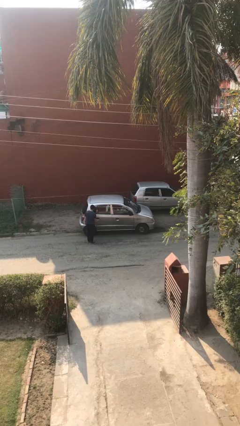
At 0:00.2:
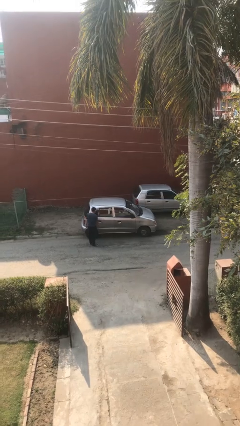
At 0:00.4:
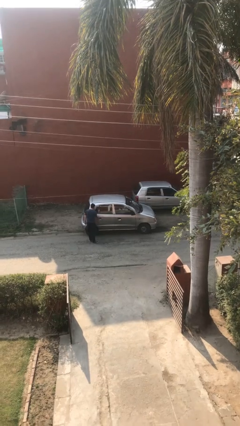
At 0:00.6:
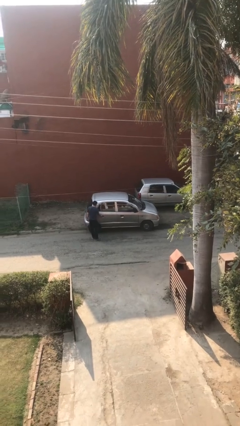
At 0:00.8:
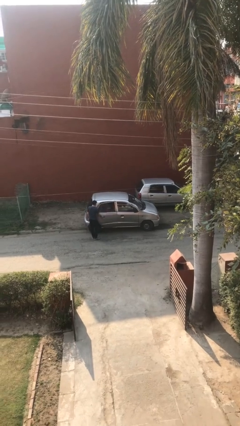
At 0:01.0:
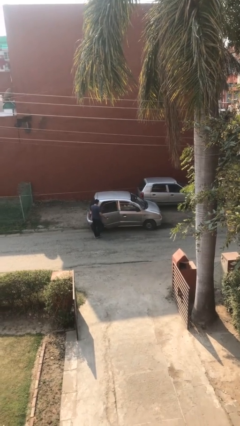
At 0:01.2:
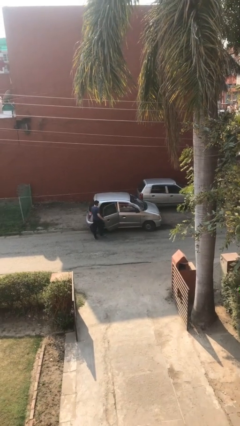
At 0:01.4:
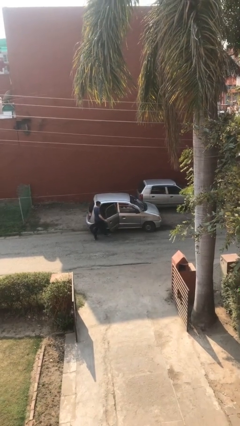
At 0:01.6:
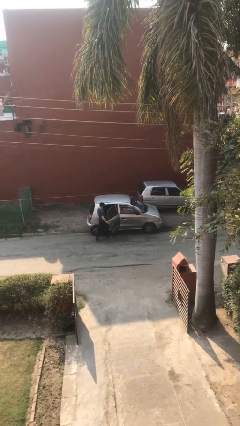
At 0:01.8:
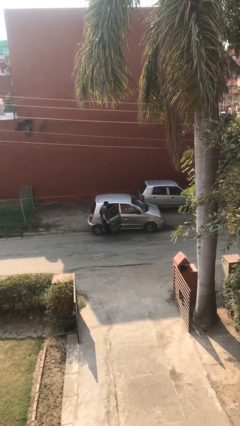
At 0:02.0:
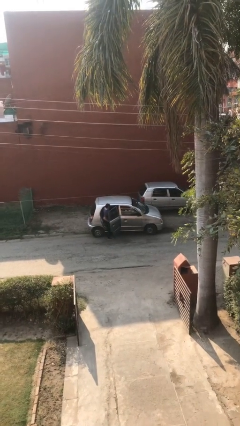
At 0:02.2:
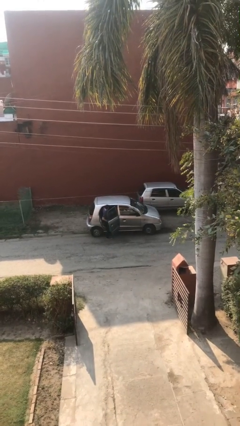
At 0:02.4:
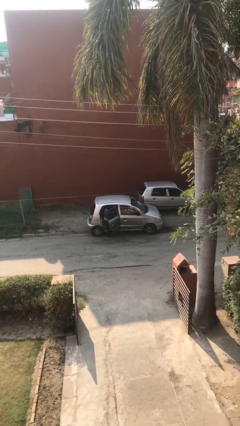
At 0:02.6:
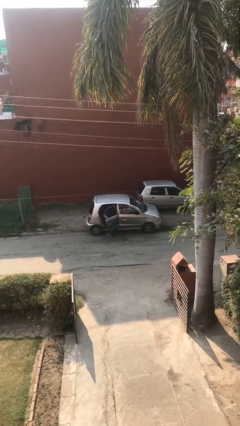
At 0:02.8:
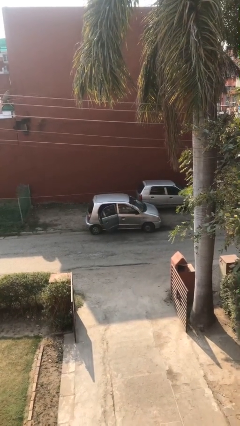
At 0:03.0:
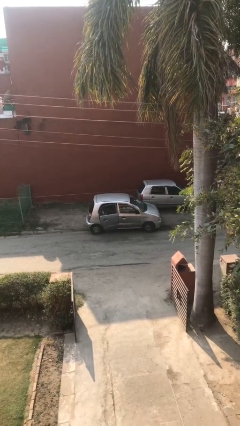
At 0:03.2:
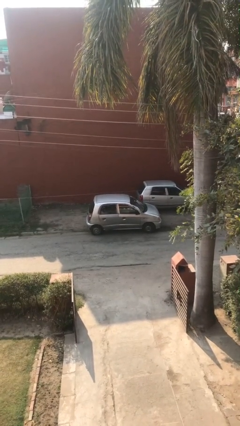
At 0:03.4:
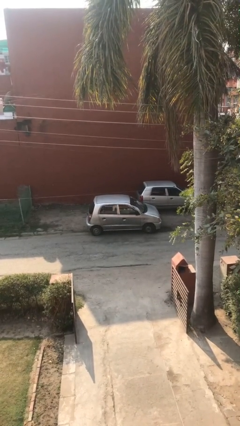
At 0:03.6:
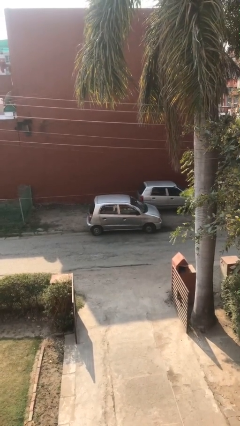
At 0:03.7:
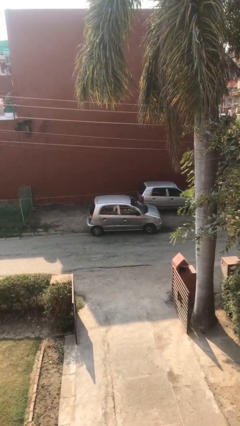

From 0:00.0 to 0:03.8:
car picks up person

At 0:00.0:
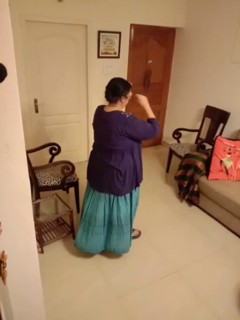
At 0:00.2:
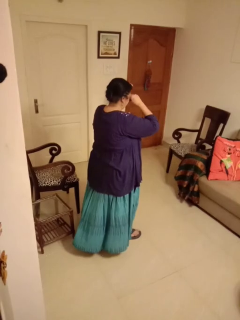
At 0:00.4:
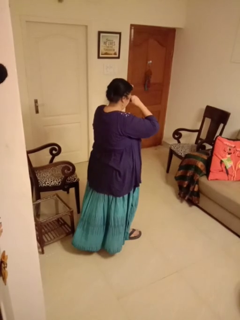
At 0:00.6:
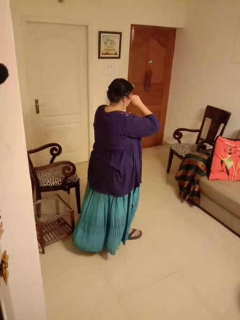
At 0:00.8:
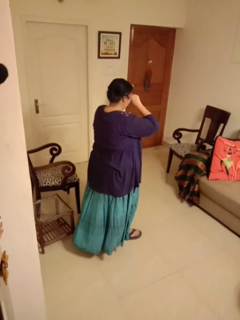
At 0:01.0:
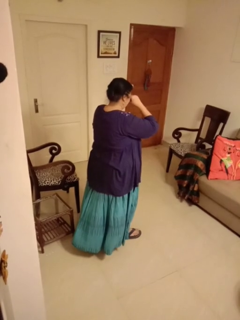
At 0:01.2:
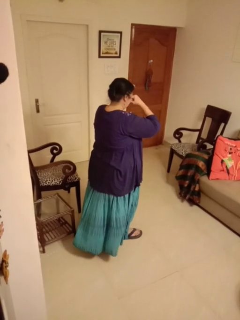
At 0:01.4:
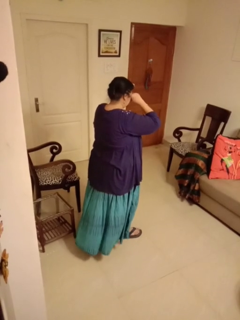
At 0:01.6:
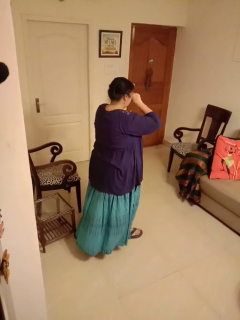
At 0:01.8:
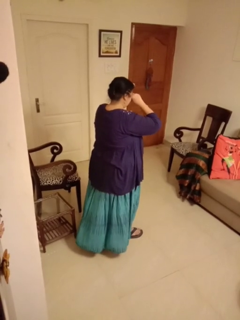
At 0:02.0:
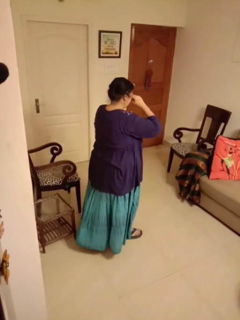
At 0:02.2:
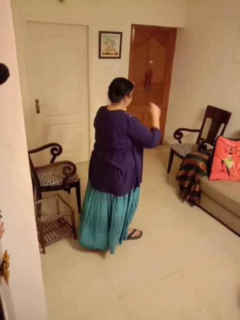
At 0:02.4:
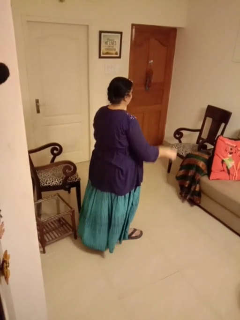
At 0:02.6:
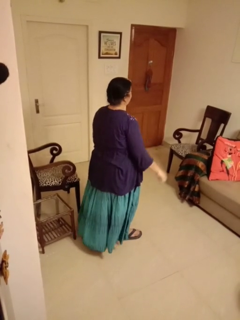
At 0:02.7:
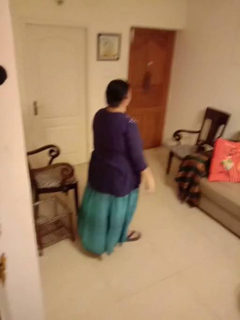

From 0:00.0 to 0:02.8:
person rubs eyes

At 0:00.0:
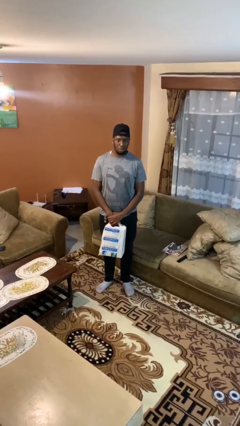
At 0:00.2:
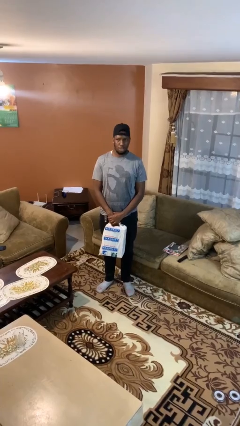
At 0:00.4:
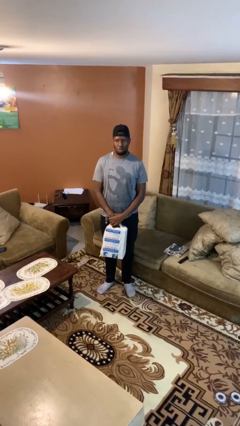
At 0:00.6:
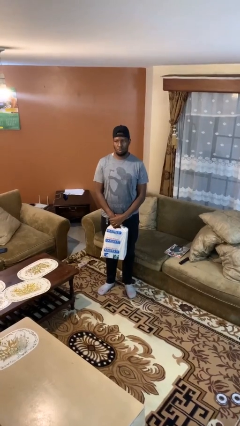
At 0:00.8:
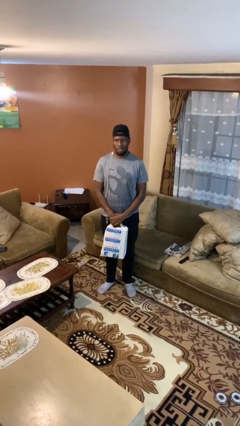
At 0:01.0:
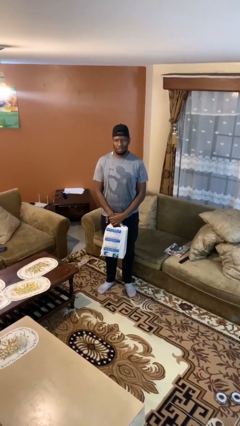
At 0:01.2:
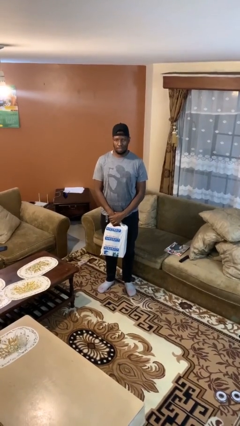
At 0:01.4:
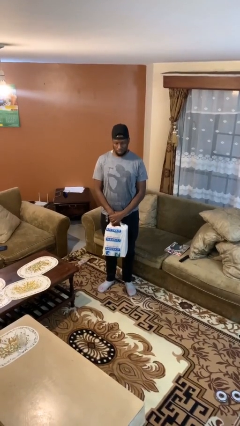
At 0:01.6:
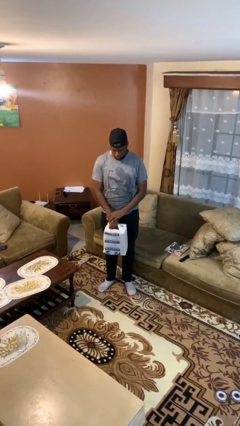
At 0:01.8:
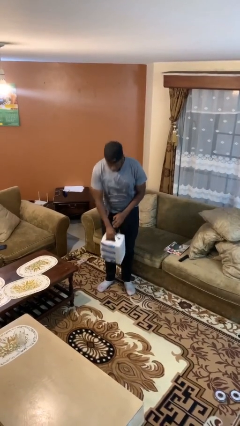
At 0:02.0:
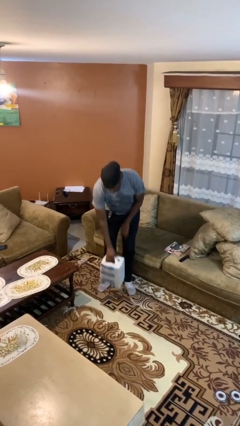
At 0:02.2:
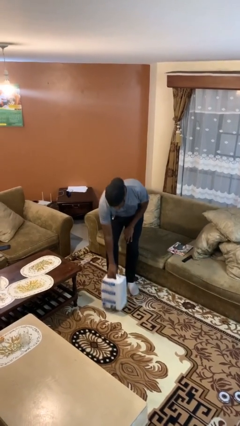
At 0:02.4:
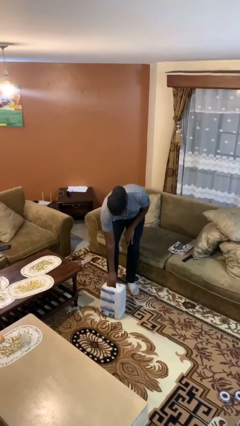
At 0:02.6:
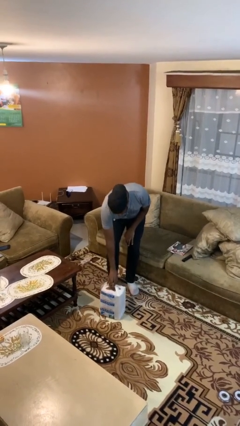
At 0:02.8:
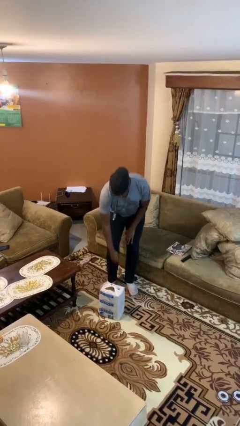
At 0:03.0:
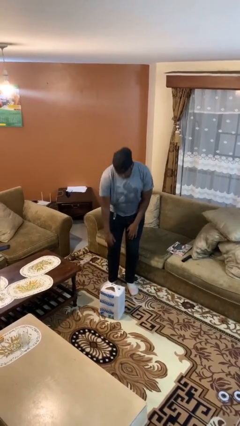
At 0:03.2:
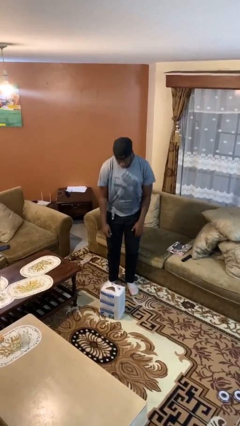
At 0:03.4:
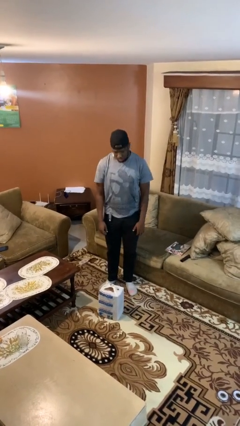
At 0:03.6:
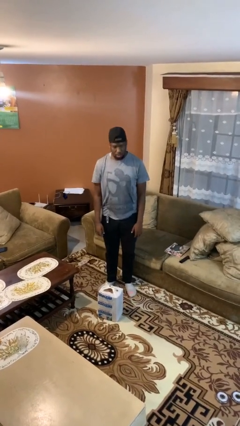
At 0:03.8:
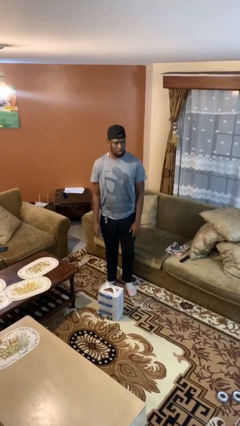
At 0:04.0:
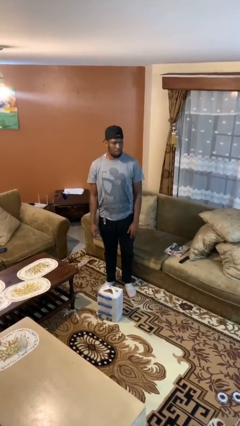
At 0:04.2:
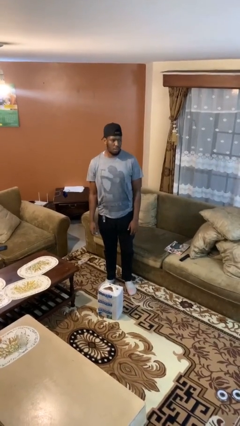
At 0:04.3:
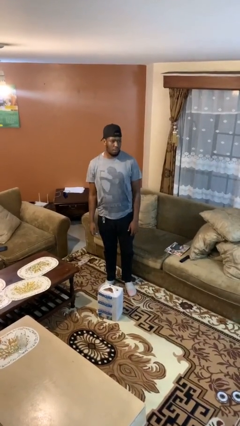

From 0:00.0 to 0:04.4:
person puts down object on floor

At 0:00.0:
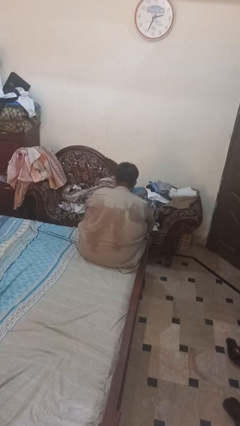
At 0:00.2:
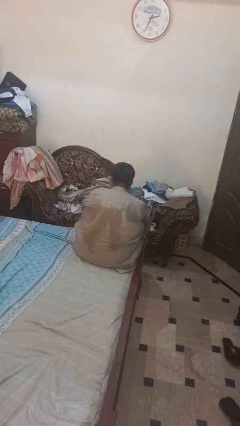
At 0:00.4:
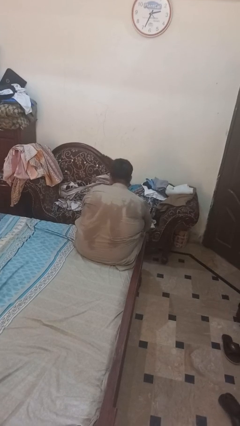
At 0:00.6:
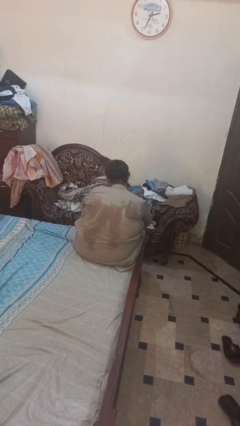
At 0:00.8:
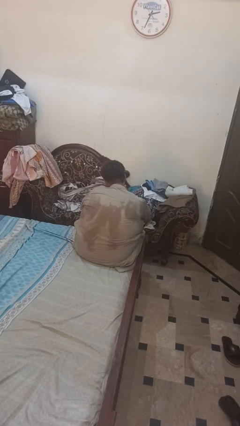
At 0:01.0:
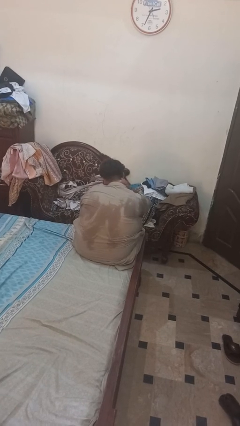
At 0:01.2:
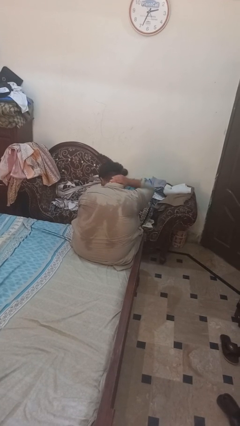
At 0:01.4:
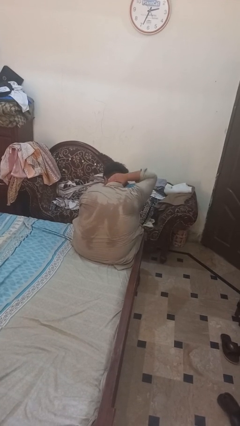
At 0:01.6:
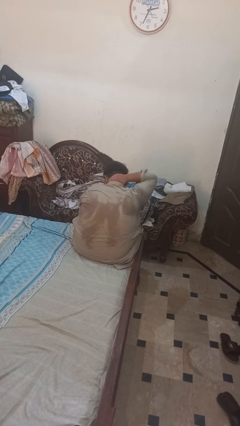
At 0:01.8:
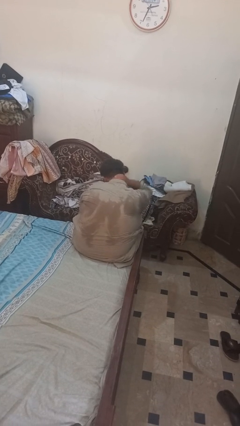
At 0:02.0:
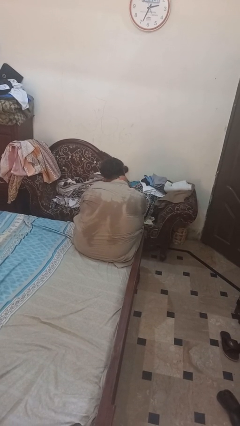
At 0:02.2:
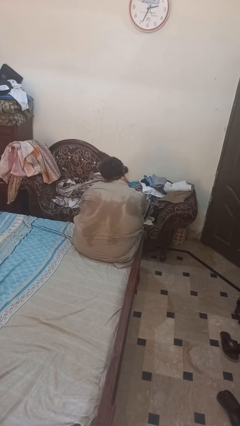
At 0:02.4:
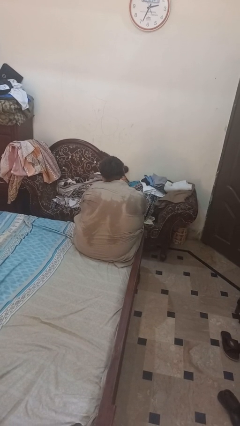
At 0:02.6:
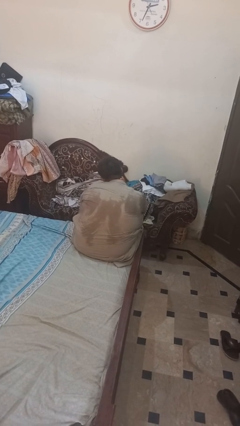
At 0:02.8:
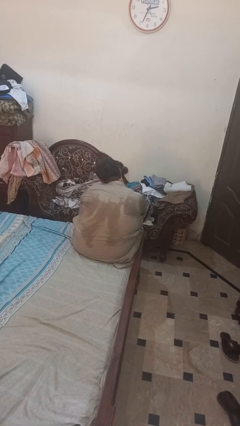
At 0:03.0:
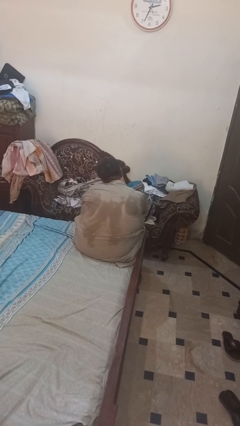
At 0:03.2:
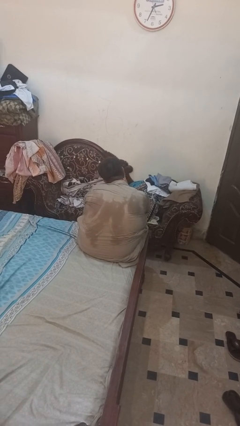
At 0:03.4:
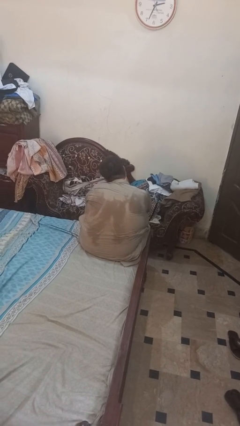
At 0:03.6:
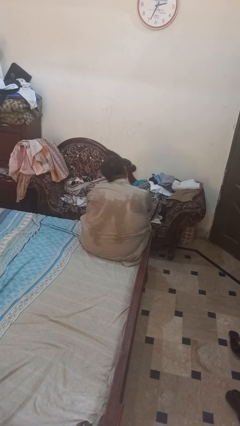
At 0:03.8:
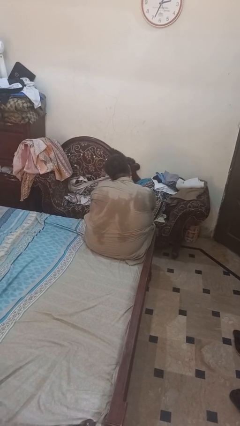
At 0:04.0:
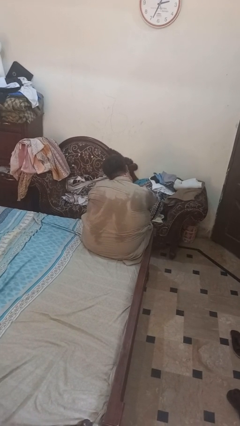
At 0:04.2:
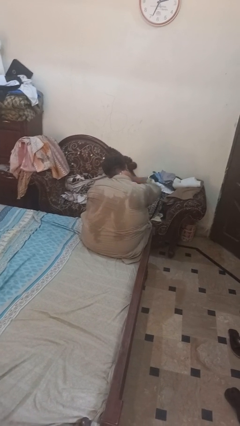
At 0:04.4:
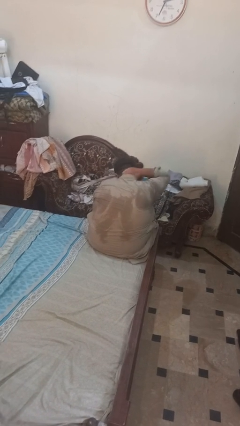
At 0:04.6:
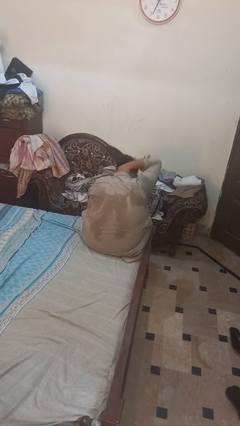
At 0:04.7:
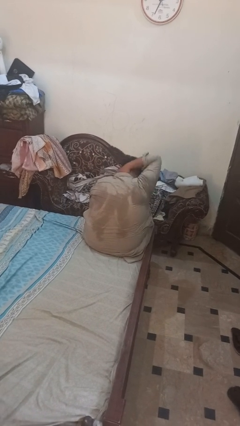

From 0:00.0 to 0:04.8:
person rubs neck

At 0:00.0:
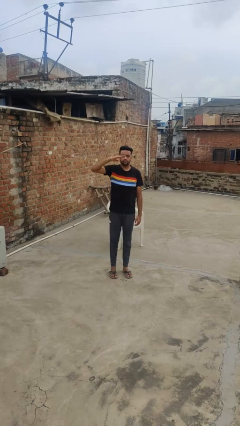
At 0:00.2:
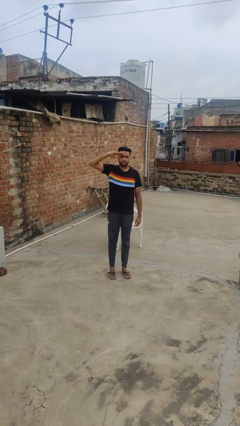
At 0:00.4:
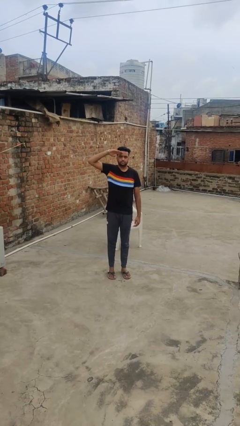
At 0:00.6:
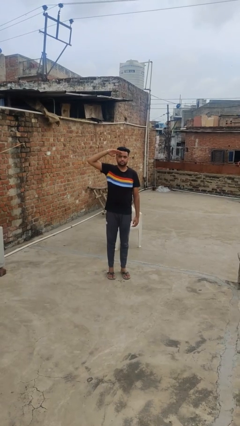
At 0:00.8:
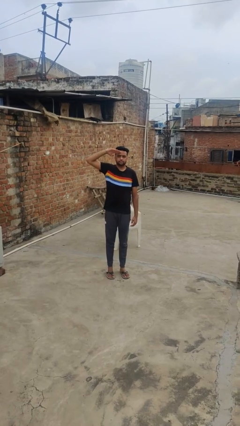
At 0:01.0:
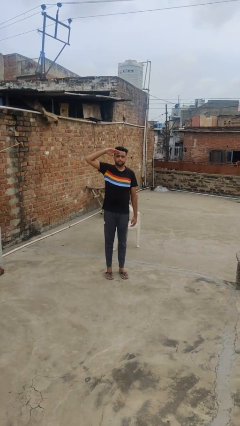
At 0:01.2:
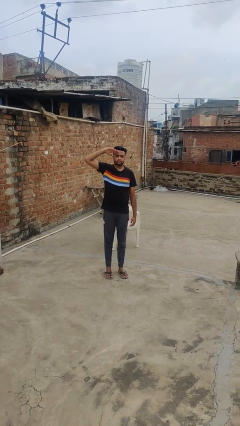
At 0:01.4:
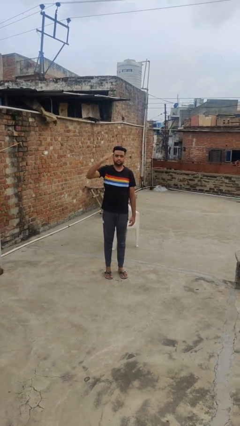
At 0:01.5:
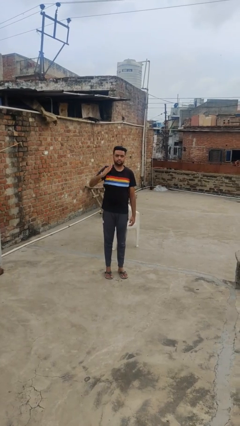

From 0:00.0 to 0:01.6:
person salutes

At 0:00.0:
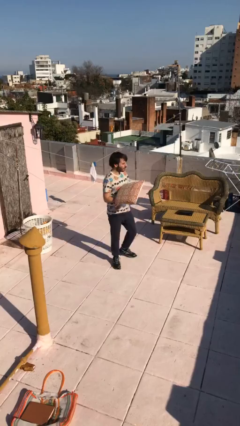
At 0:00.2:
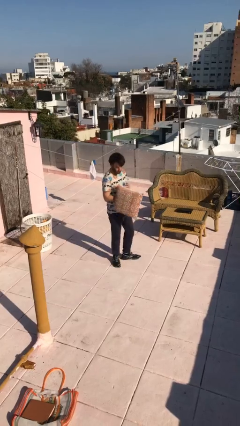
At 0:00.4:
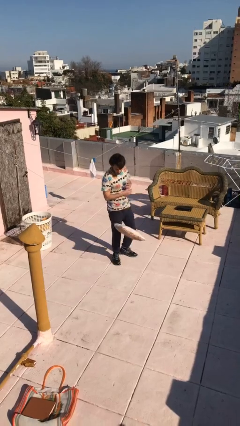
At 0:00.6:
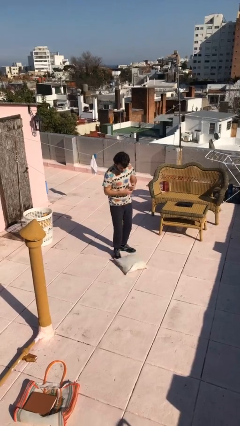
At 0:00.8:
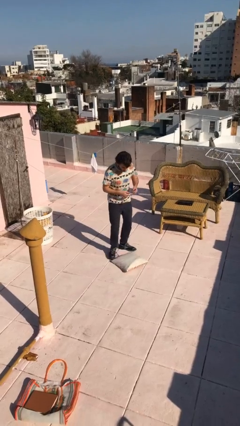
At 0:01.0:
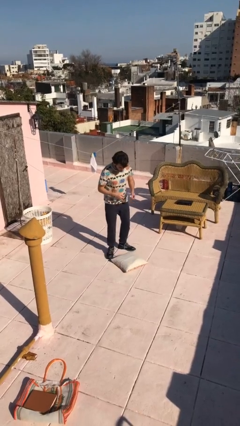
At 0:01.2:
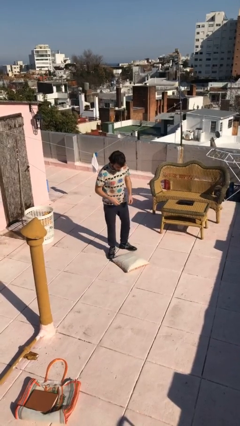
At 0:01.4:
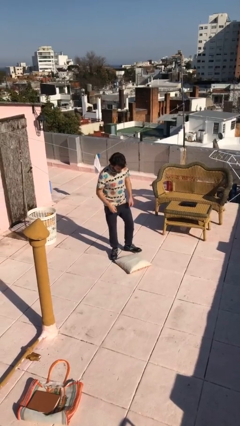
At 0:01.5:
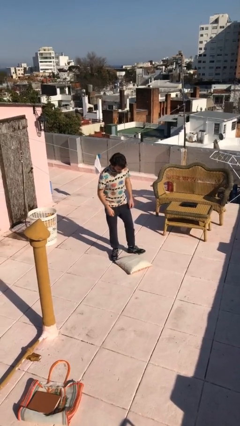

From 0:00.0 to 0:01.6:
person drops object
